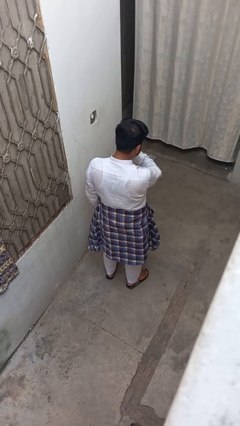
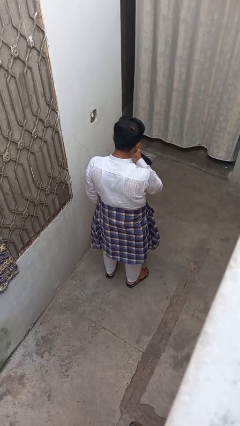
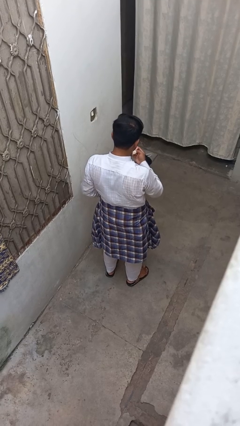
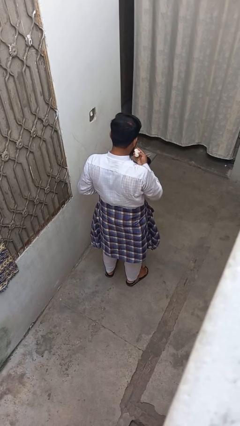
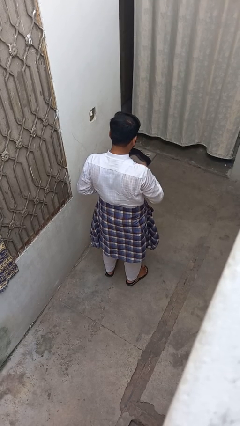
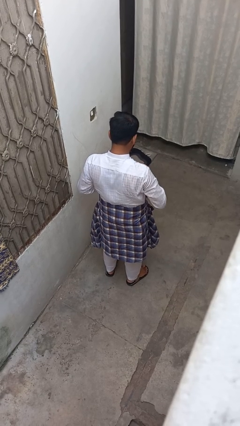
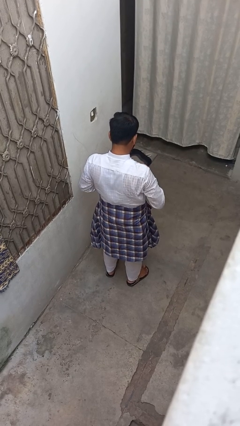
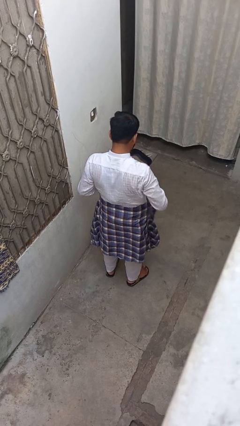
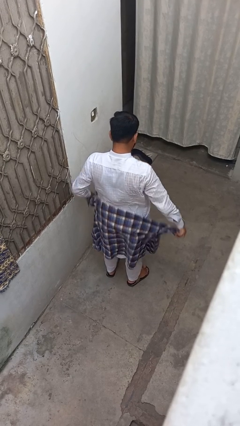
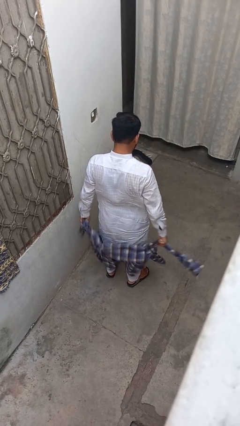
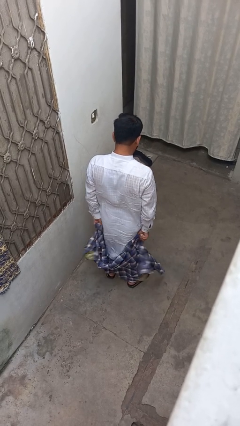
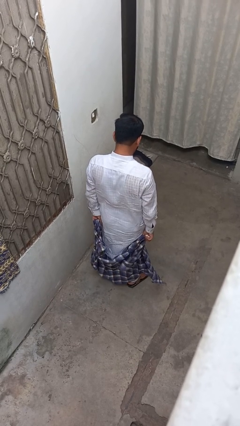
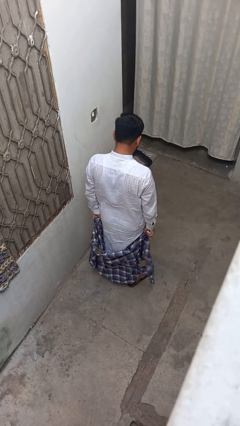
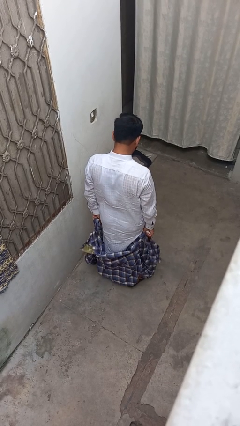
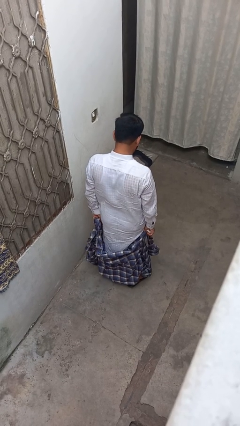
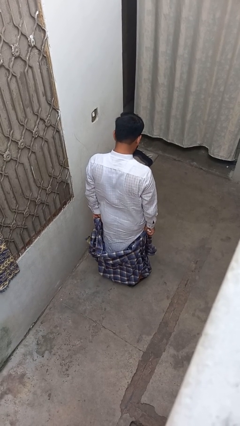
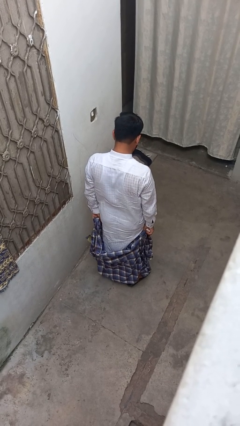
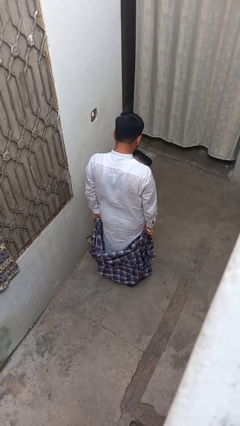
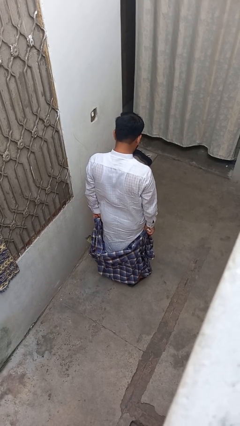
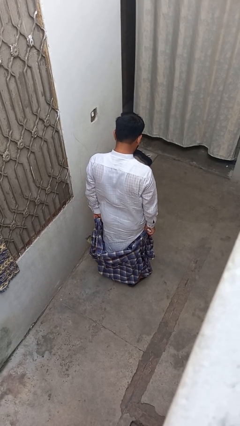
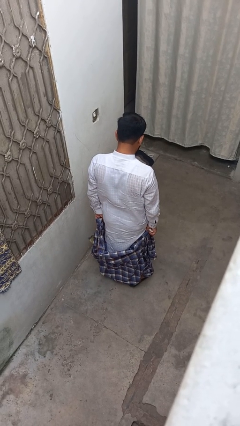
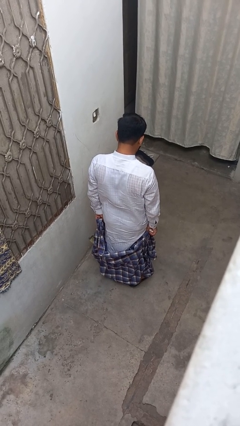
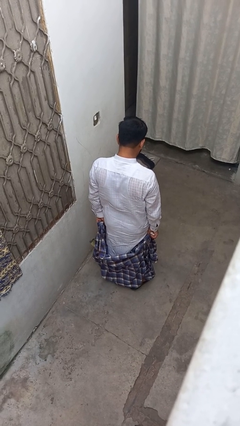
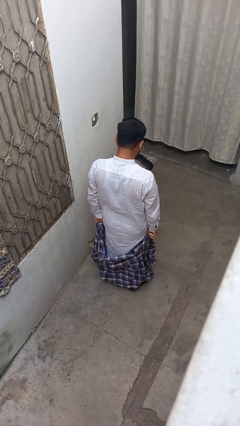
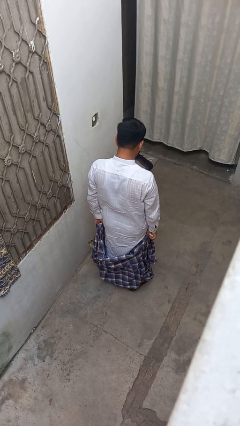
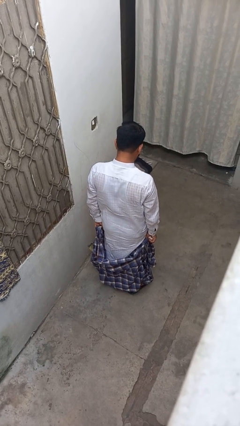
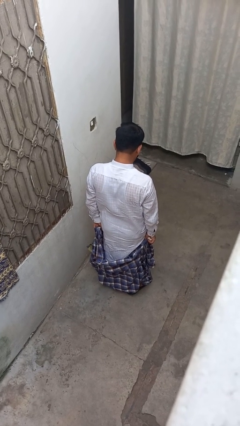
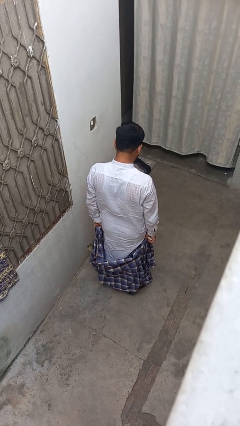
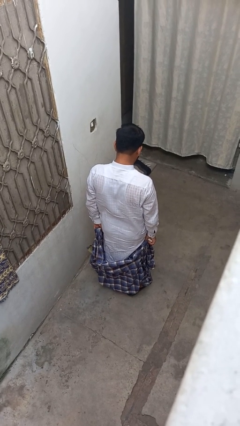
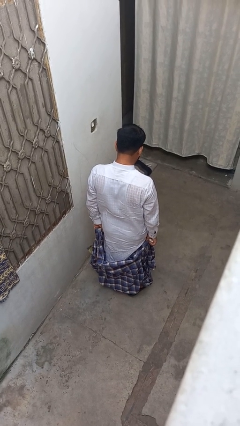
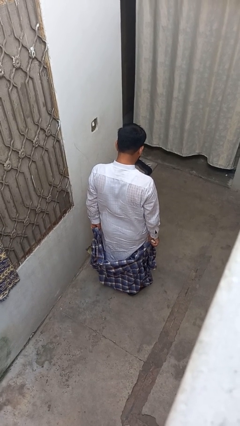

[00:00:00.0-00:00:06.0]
person unties jacket around waist

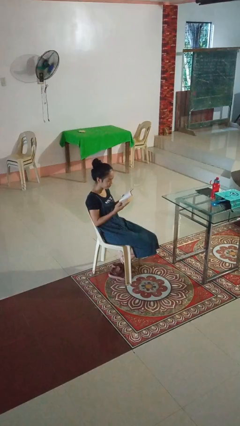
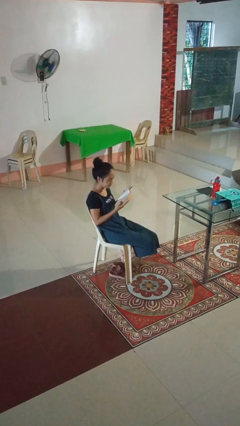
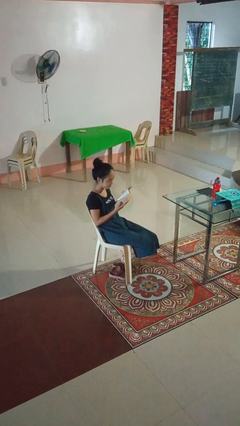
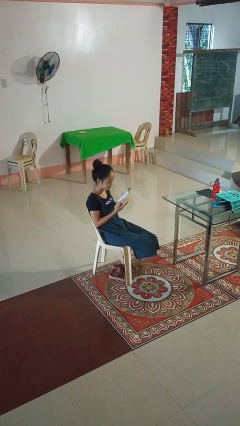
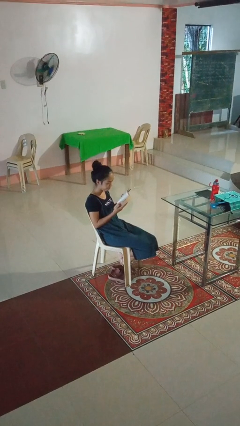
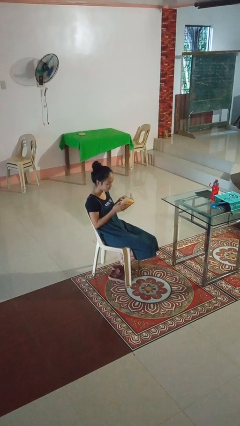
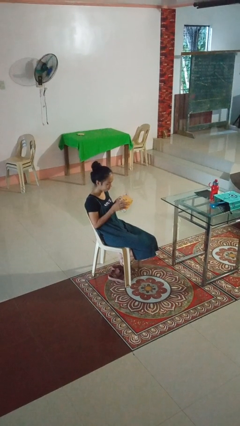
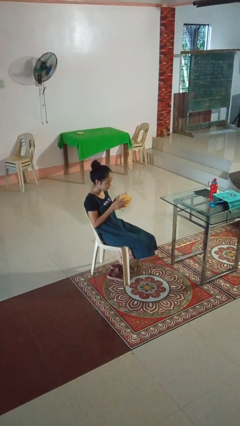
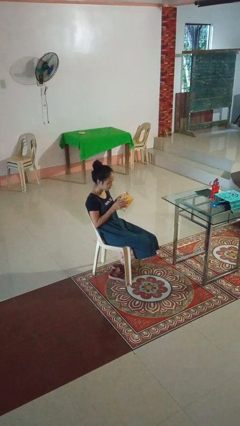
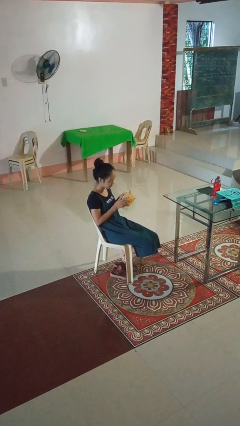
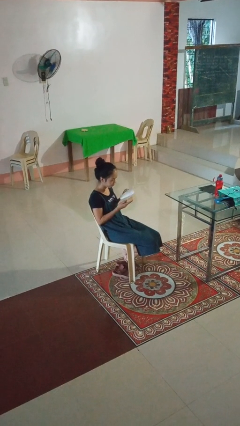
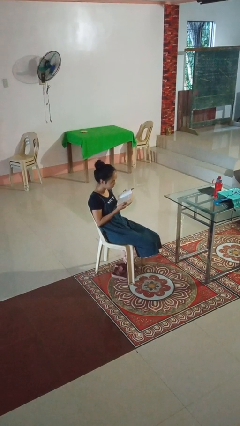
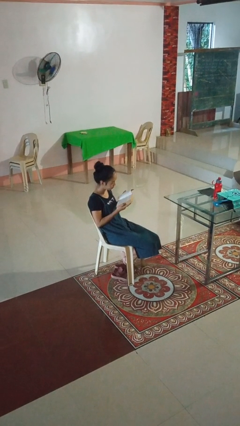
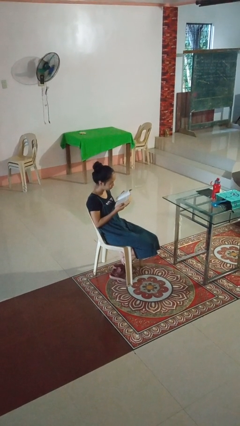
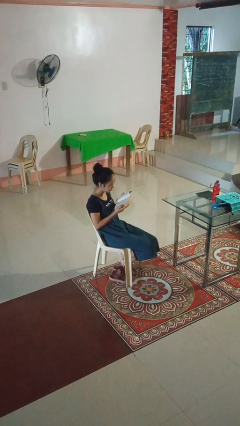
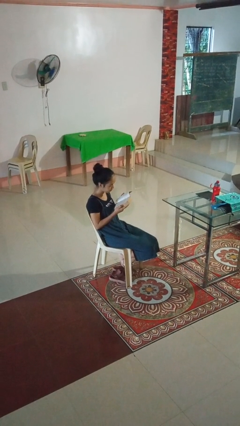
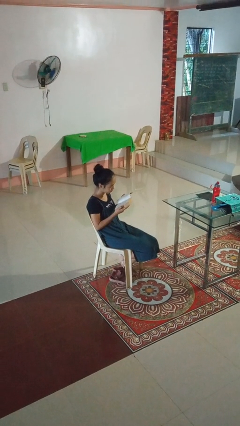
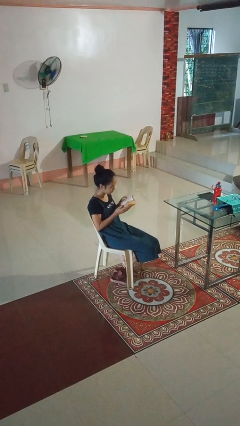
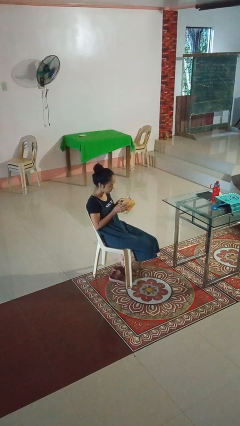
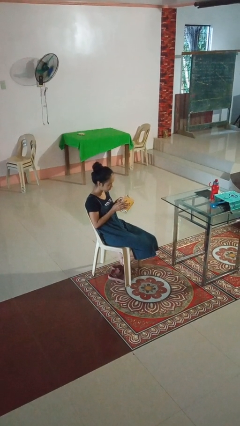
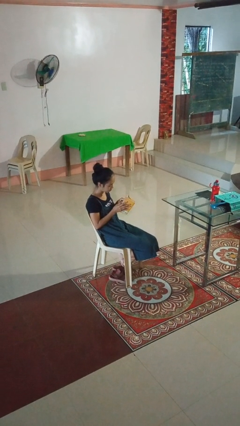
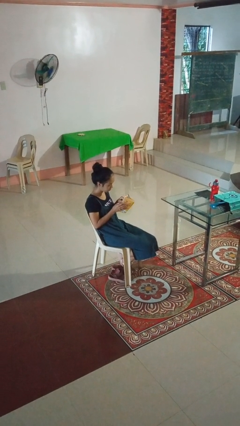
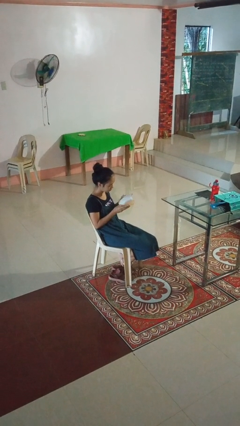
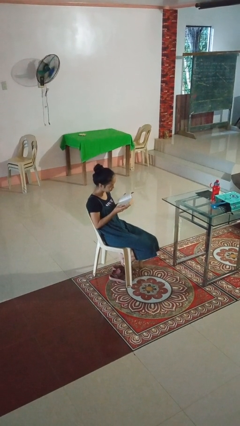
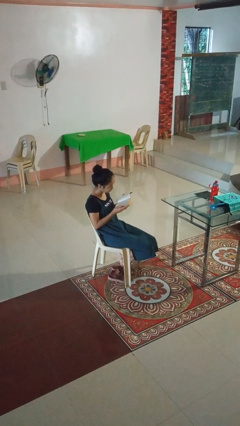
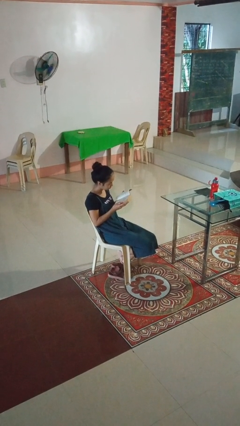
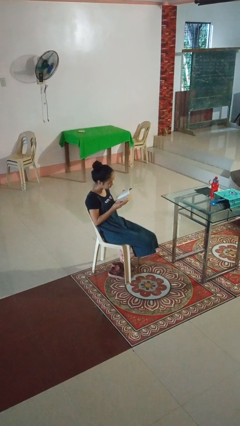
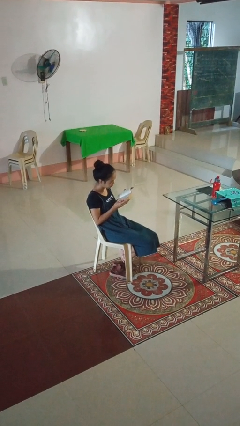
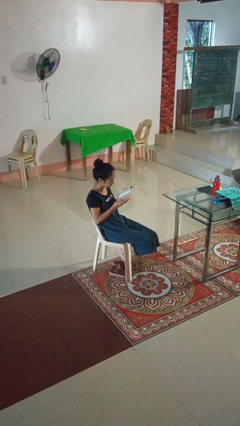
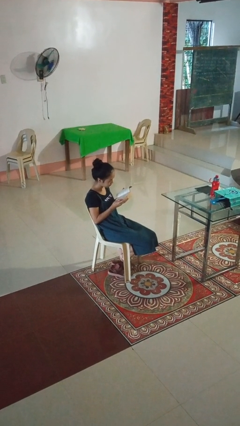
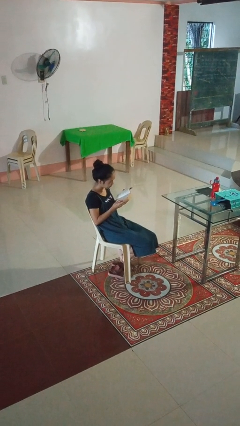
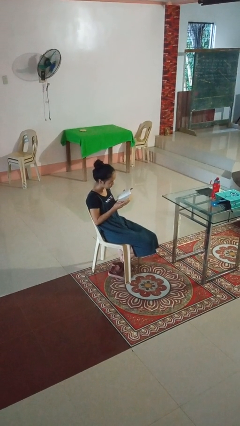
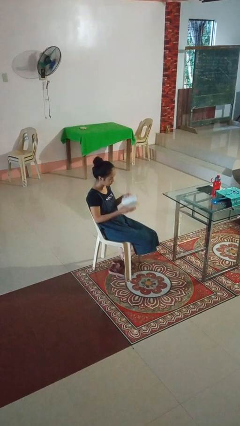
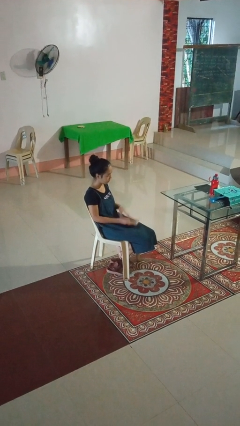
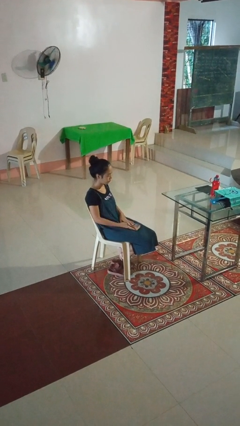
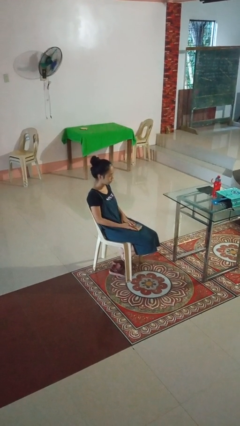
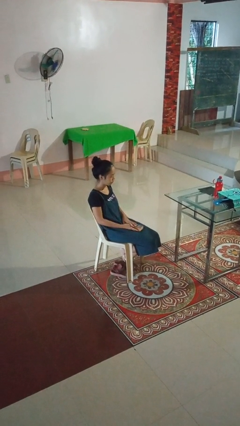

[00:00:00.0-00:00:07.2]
person reads book

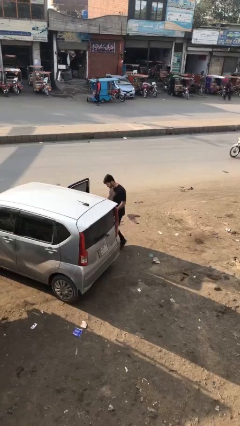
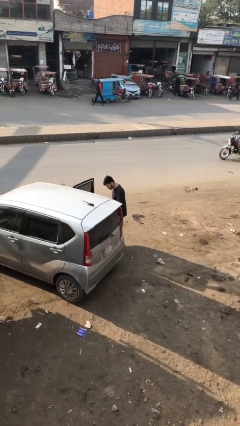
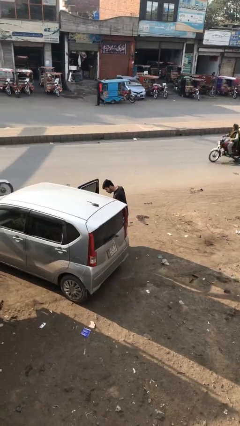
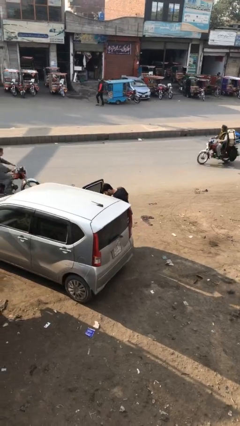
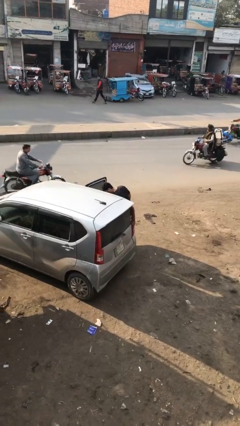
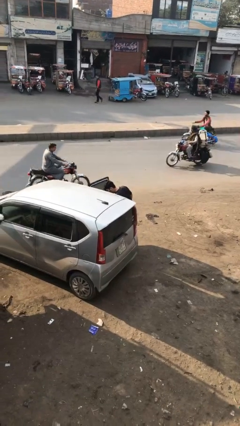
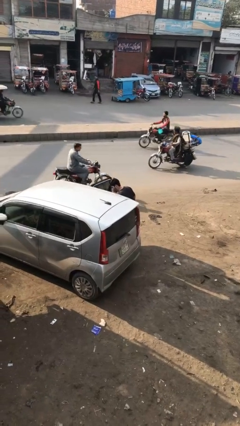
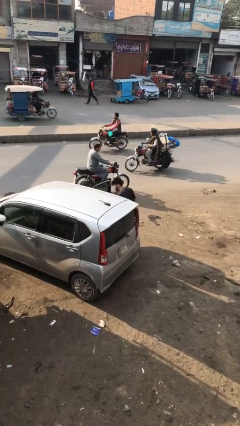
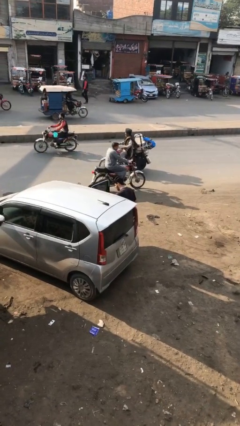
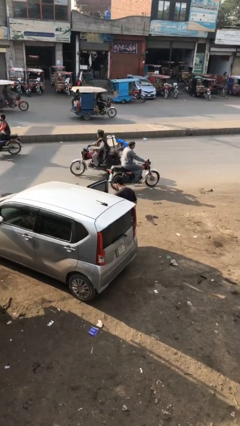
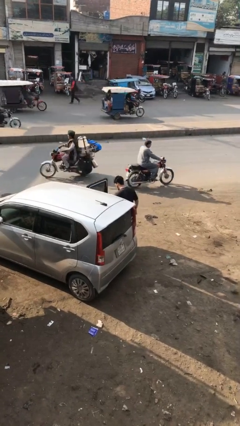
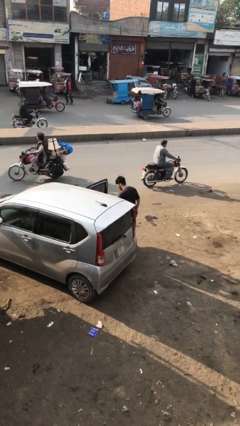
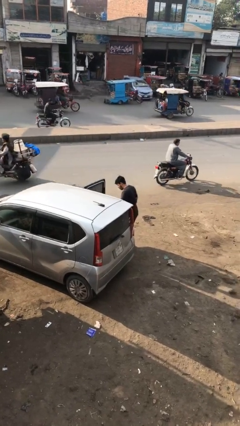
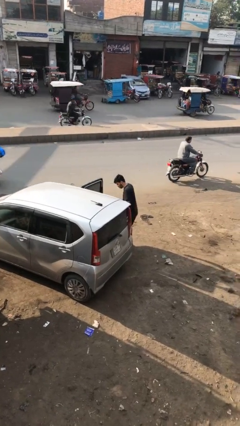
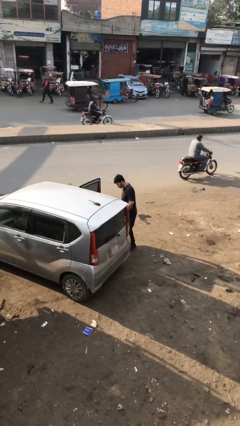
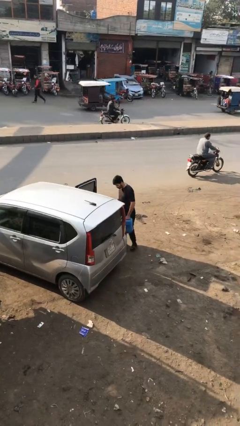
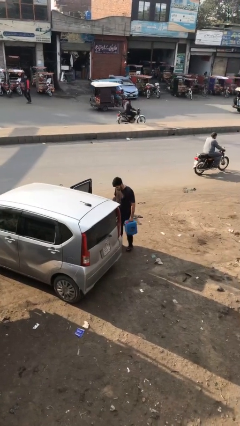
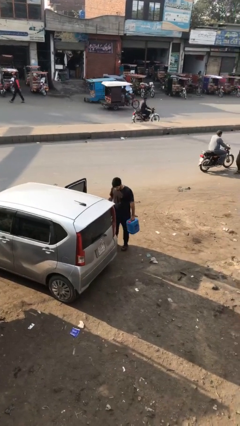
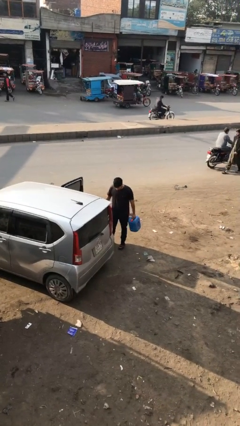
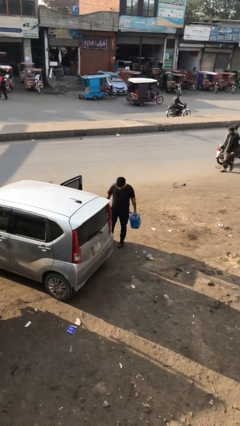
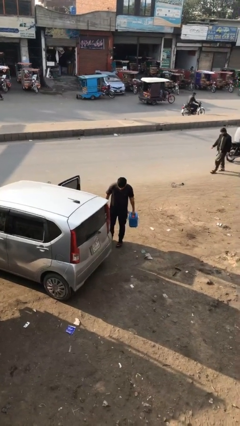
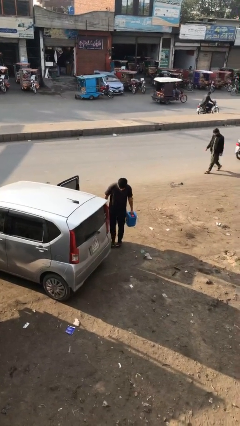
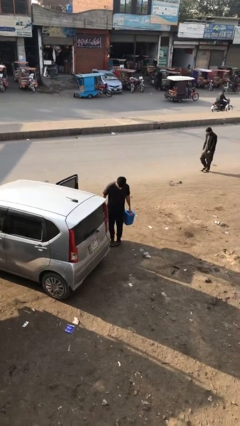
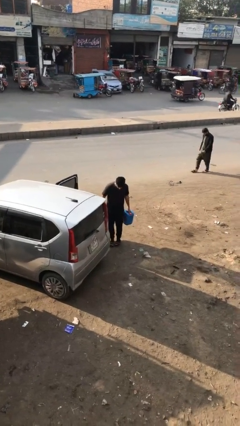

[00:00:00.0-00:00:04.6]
person unloads car
